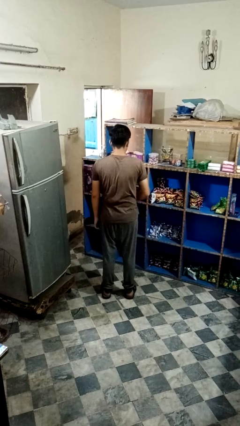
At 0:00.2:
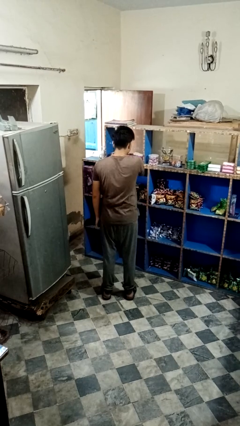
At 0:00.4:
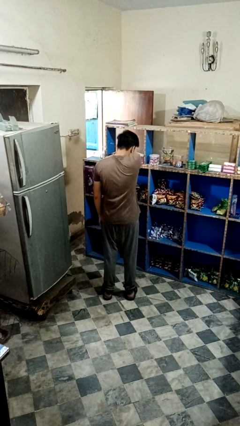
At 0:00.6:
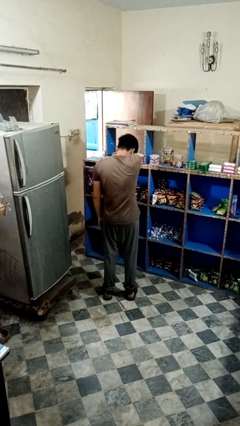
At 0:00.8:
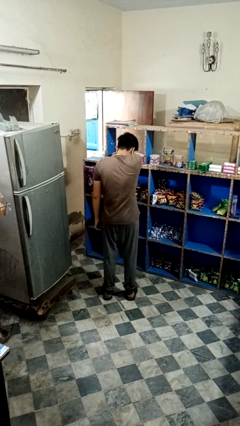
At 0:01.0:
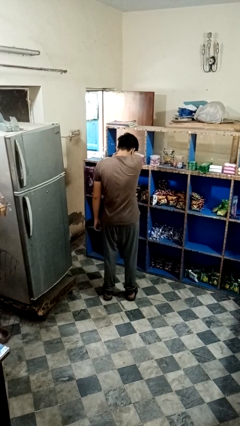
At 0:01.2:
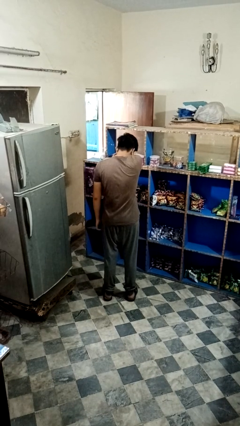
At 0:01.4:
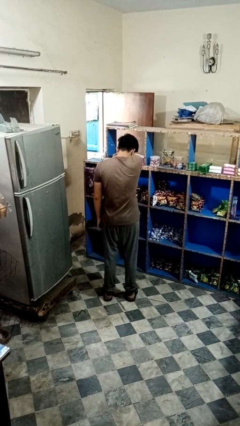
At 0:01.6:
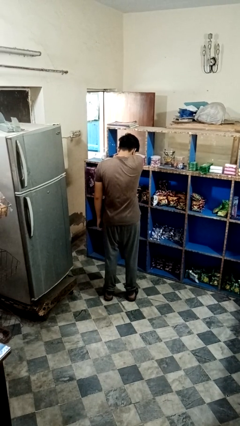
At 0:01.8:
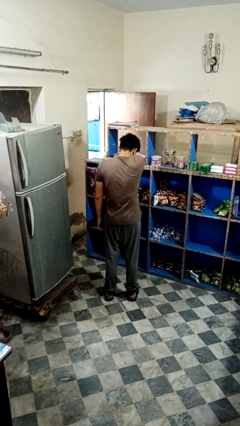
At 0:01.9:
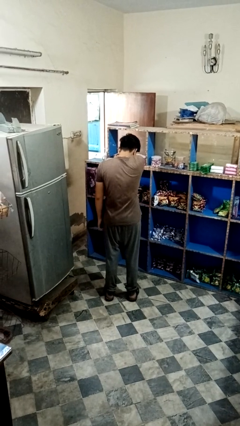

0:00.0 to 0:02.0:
person sneezes into arm

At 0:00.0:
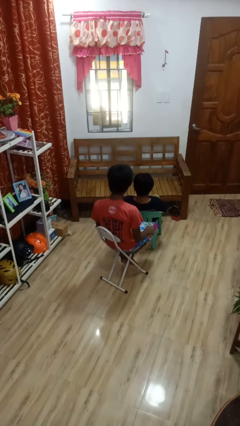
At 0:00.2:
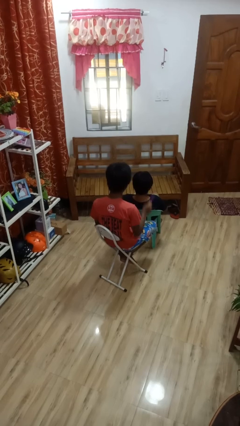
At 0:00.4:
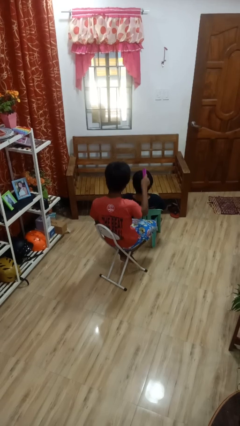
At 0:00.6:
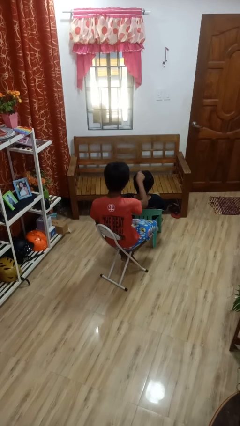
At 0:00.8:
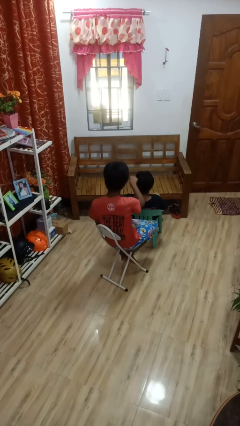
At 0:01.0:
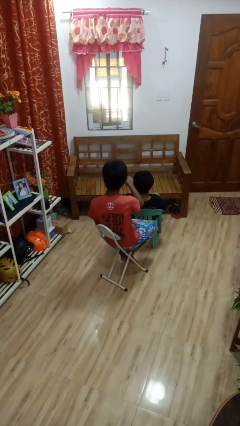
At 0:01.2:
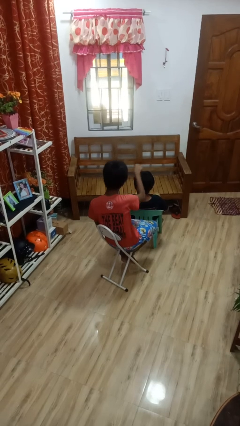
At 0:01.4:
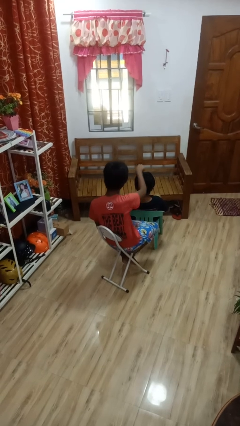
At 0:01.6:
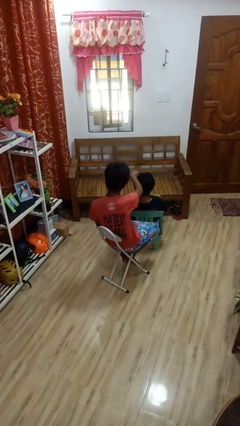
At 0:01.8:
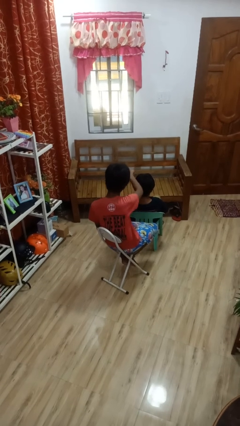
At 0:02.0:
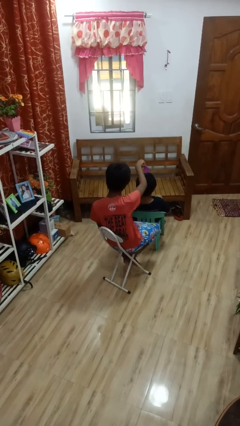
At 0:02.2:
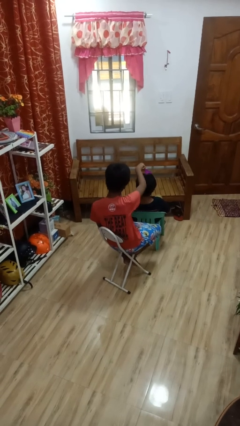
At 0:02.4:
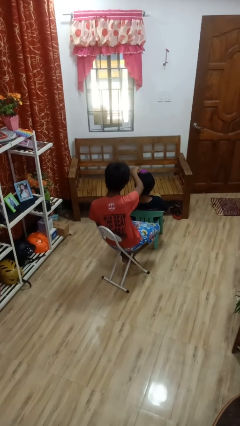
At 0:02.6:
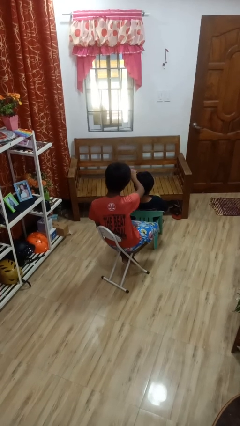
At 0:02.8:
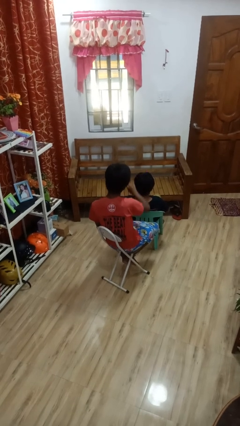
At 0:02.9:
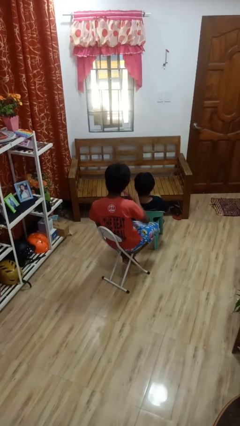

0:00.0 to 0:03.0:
person brushes hair of person

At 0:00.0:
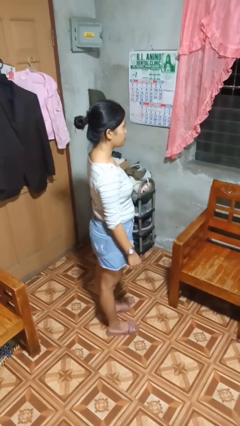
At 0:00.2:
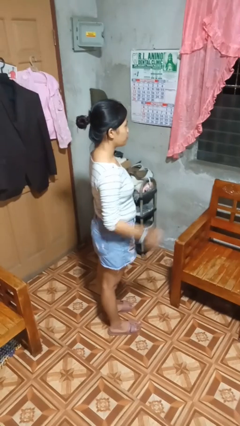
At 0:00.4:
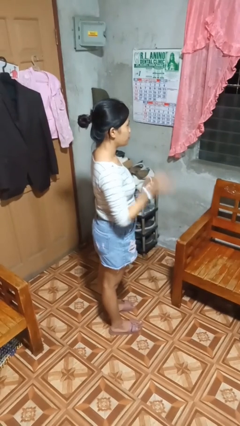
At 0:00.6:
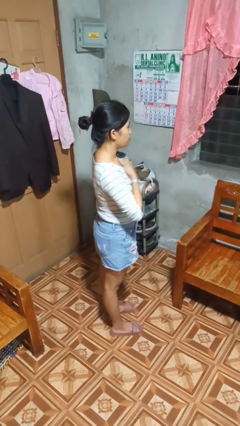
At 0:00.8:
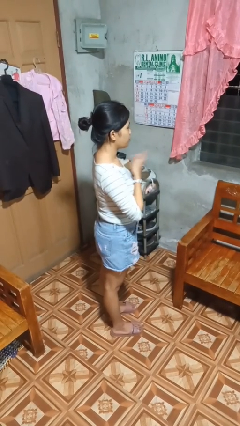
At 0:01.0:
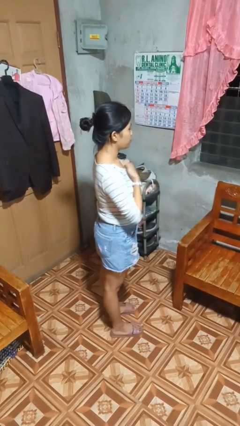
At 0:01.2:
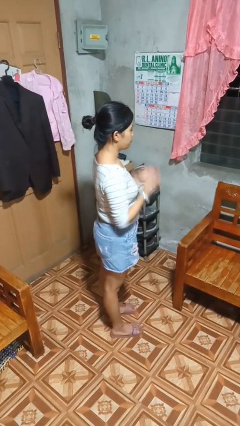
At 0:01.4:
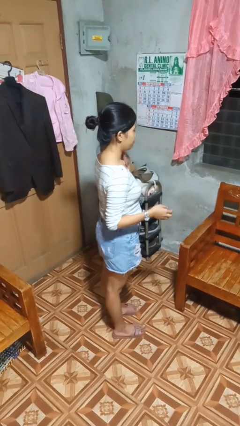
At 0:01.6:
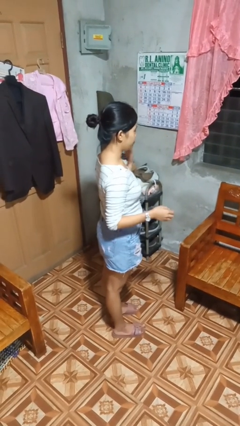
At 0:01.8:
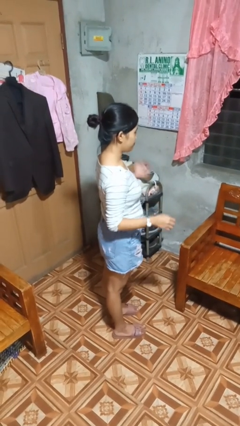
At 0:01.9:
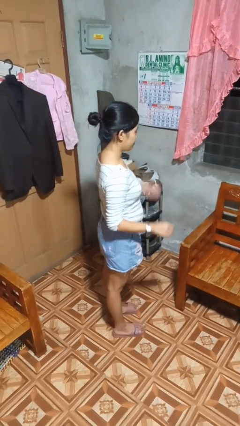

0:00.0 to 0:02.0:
person drums on chest

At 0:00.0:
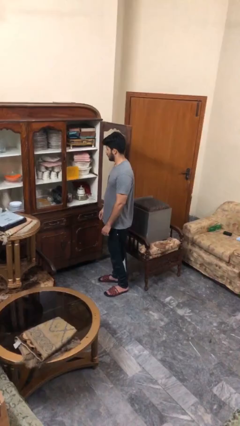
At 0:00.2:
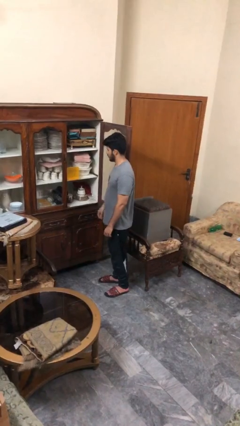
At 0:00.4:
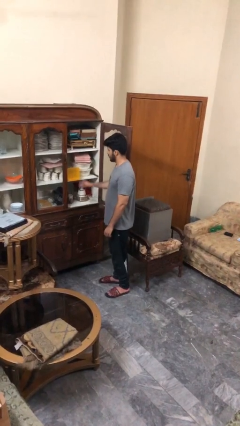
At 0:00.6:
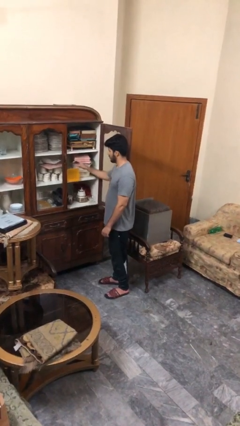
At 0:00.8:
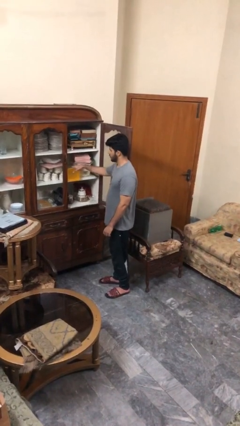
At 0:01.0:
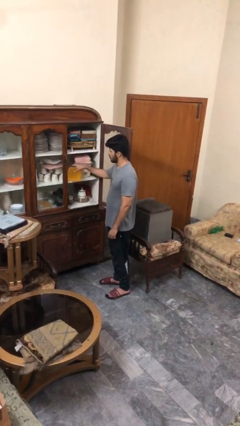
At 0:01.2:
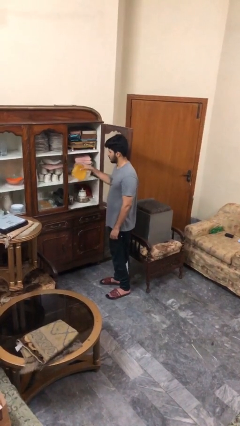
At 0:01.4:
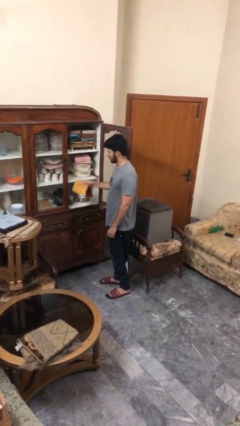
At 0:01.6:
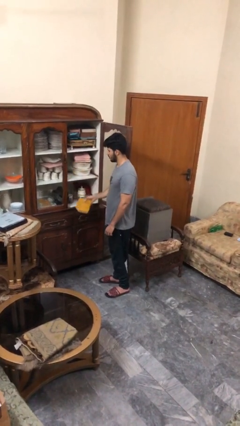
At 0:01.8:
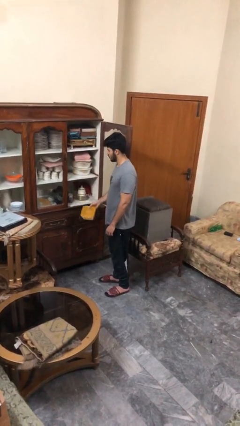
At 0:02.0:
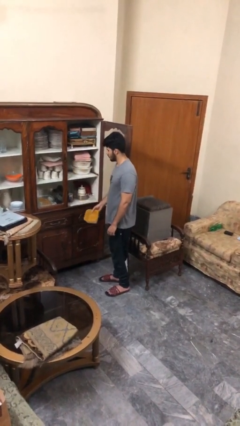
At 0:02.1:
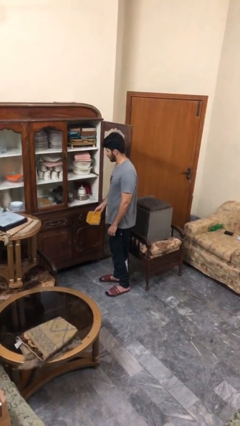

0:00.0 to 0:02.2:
person picks up object from cabinet

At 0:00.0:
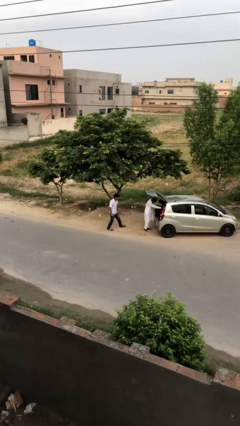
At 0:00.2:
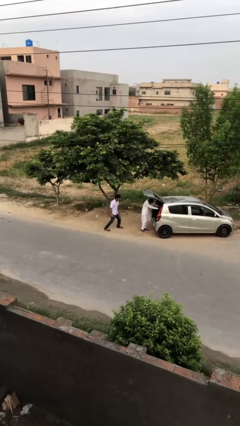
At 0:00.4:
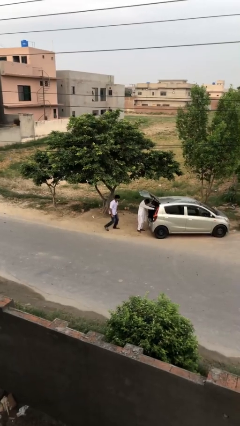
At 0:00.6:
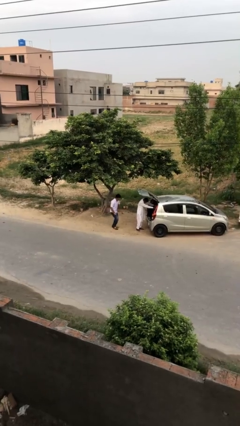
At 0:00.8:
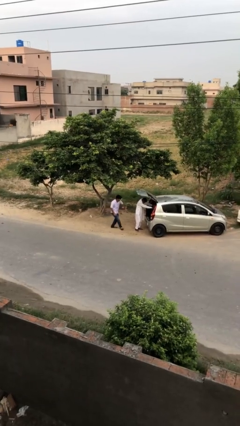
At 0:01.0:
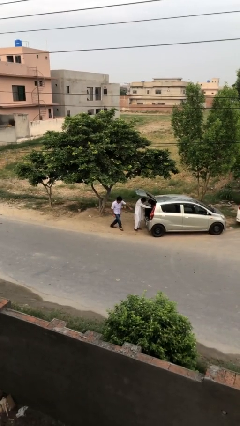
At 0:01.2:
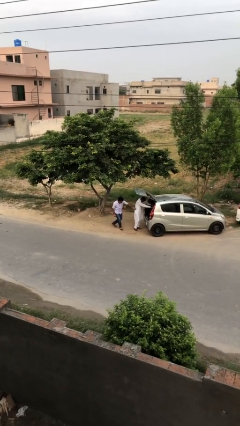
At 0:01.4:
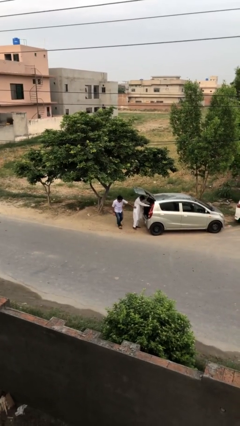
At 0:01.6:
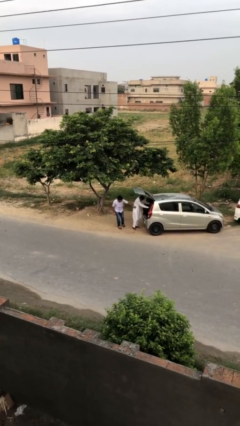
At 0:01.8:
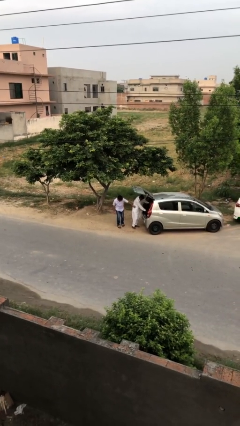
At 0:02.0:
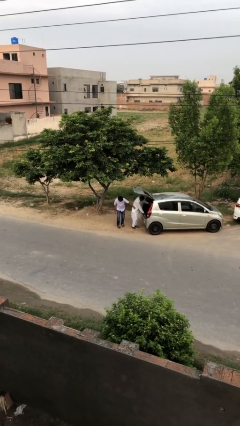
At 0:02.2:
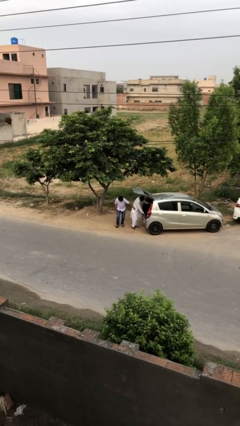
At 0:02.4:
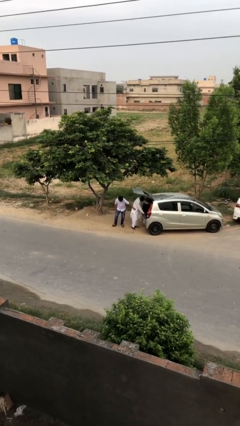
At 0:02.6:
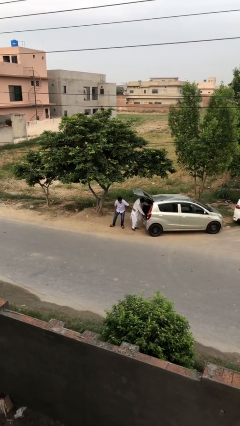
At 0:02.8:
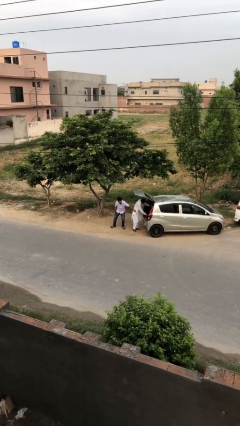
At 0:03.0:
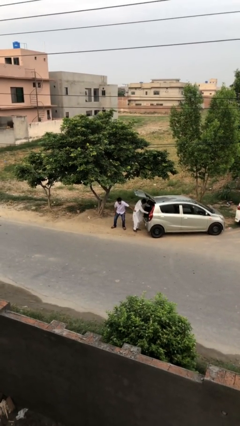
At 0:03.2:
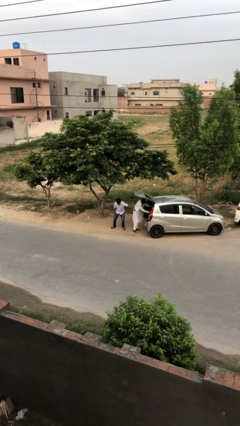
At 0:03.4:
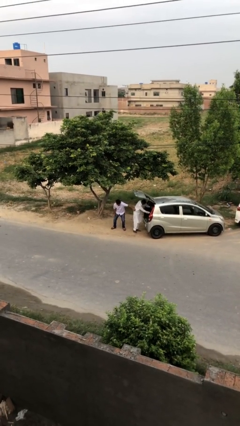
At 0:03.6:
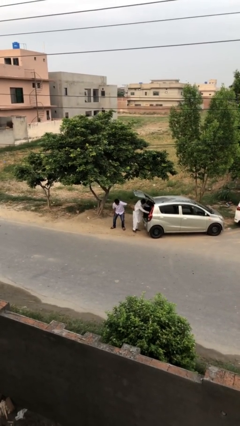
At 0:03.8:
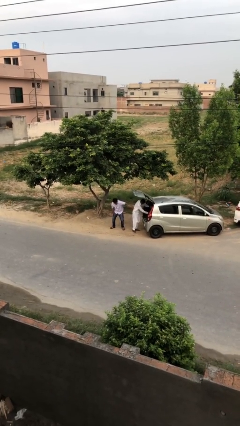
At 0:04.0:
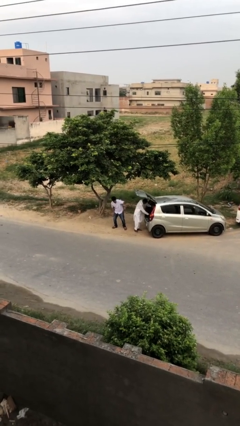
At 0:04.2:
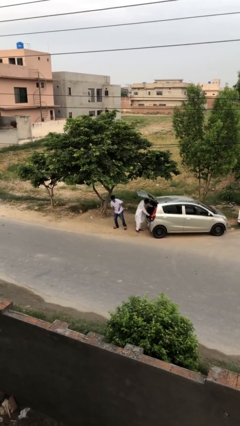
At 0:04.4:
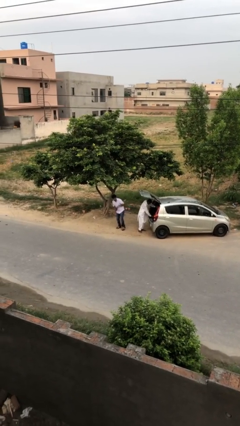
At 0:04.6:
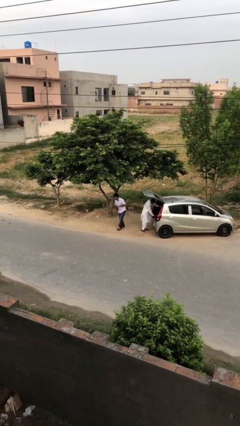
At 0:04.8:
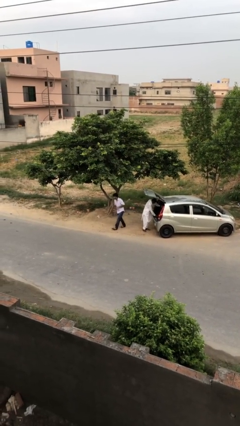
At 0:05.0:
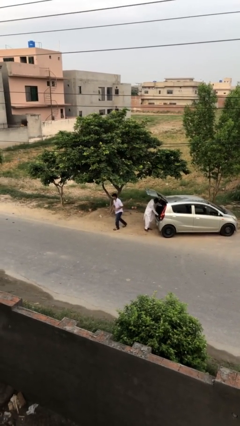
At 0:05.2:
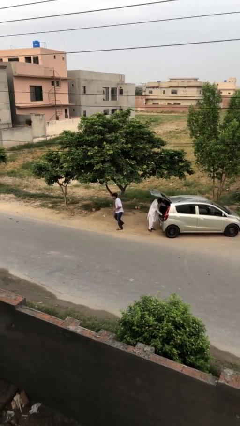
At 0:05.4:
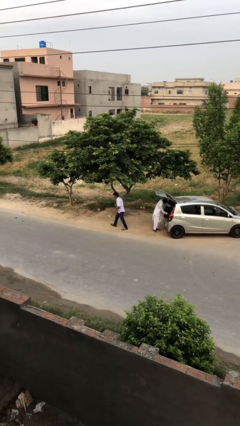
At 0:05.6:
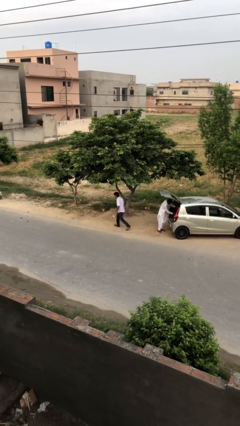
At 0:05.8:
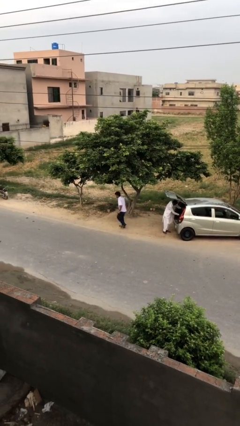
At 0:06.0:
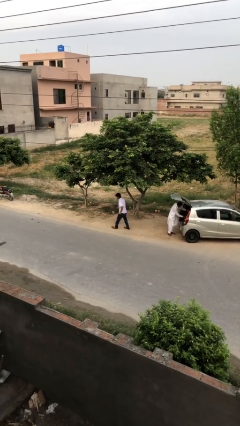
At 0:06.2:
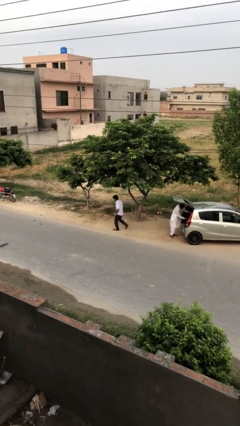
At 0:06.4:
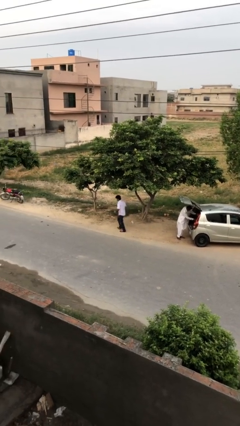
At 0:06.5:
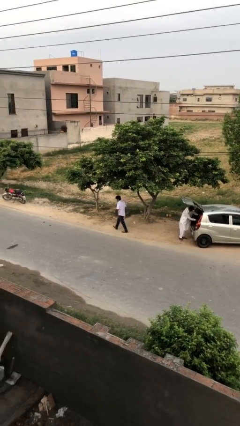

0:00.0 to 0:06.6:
person steals object from person

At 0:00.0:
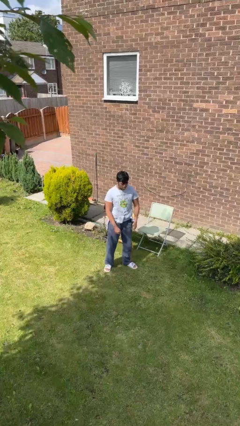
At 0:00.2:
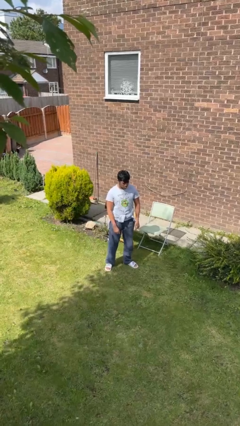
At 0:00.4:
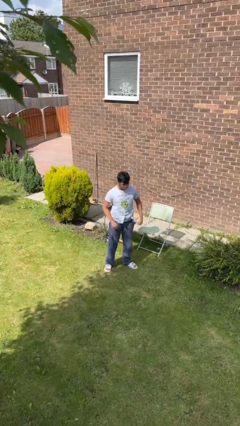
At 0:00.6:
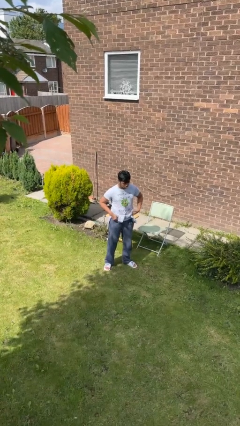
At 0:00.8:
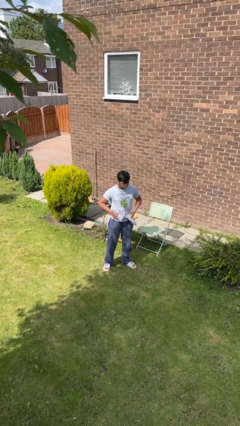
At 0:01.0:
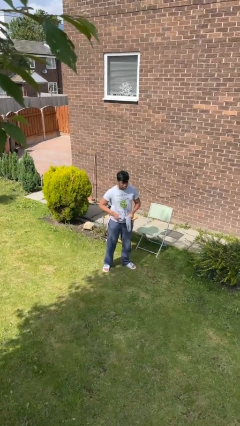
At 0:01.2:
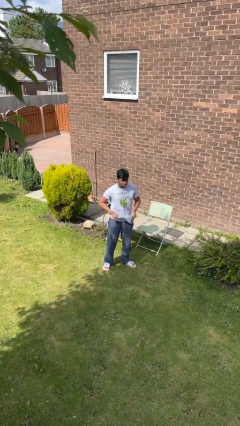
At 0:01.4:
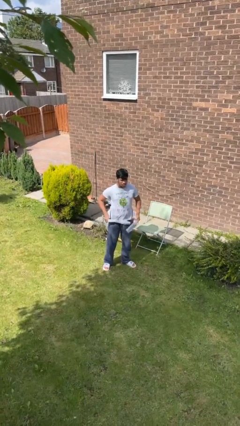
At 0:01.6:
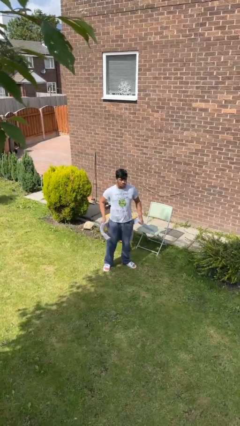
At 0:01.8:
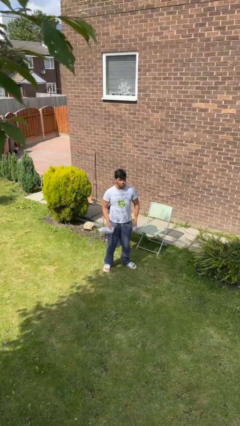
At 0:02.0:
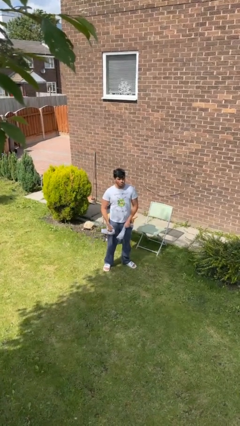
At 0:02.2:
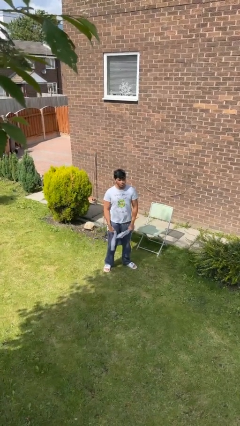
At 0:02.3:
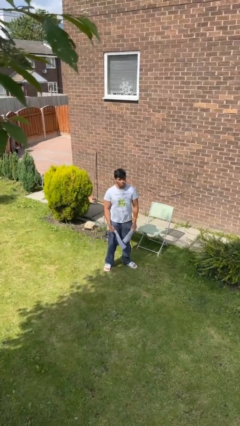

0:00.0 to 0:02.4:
person unties jacket around waist
